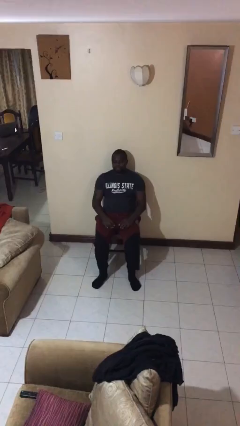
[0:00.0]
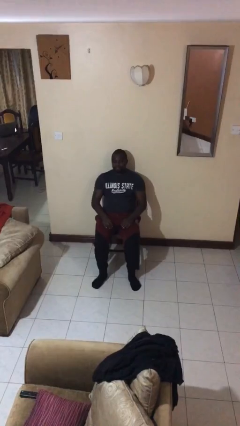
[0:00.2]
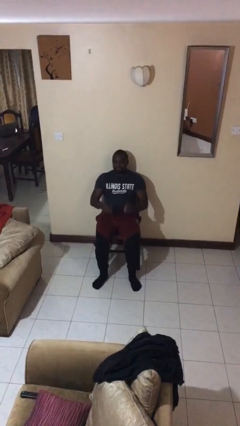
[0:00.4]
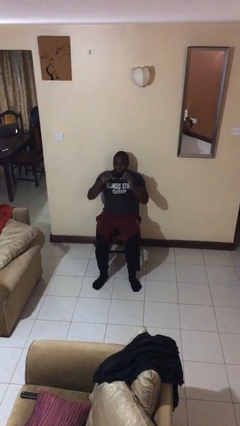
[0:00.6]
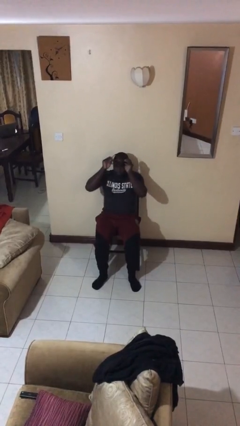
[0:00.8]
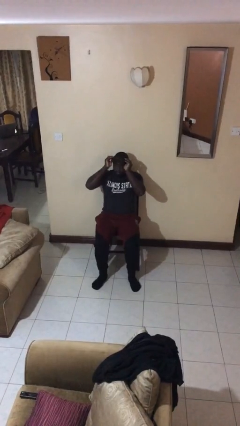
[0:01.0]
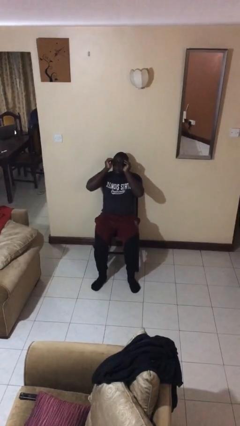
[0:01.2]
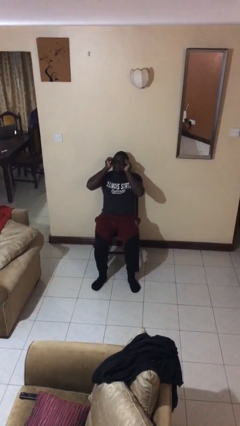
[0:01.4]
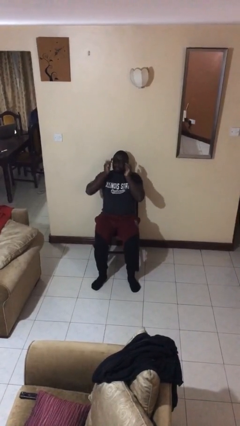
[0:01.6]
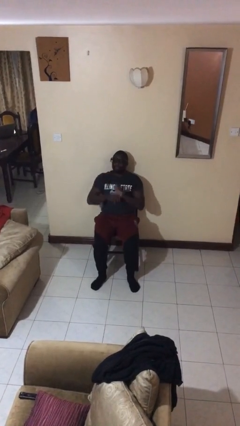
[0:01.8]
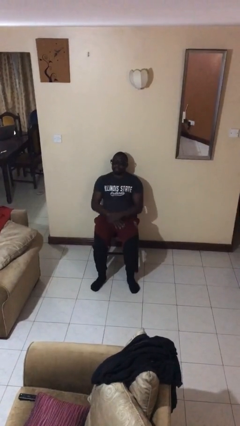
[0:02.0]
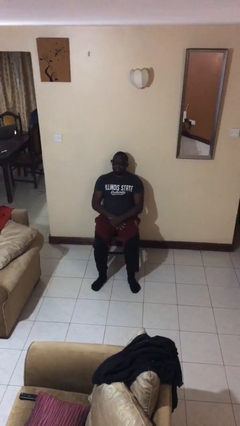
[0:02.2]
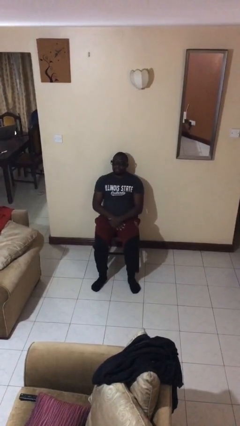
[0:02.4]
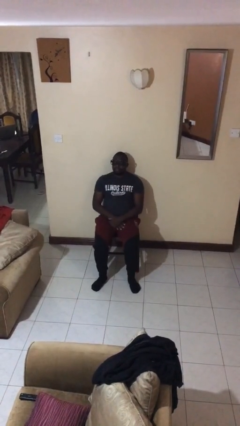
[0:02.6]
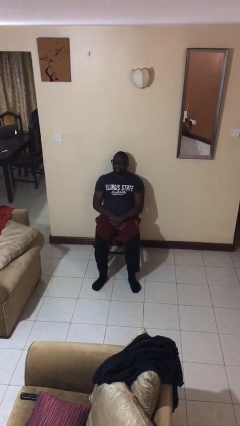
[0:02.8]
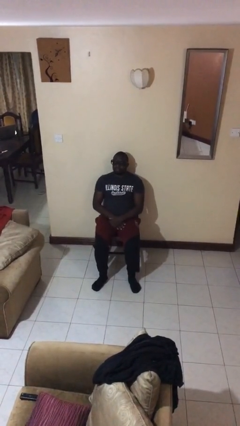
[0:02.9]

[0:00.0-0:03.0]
person puts on glasses

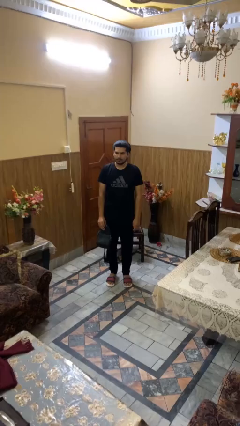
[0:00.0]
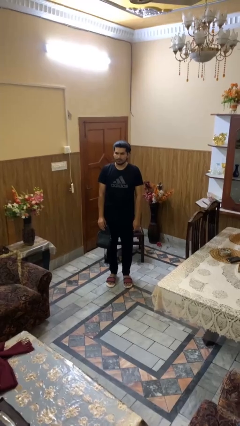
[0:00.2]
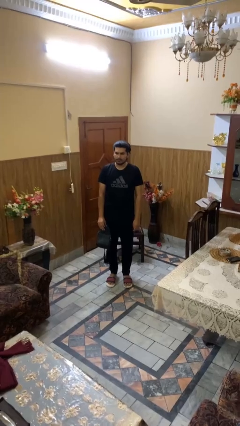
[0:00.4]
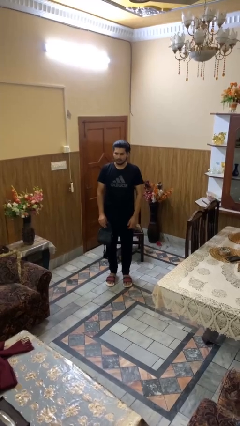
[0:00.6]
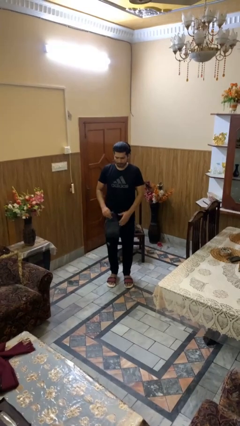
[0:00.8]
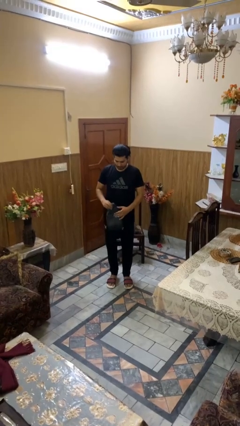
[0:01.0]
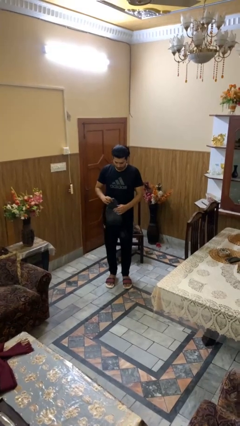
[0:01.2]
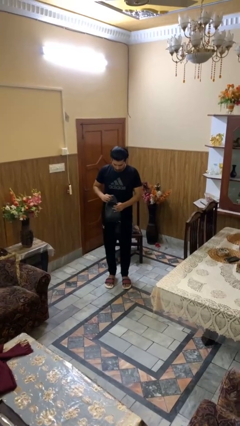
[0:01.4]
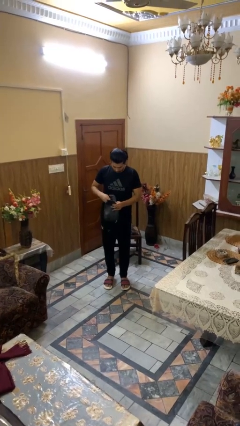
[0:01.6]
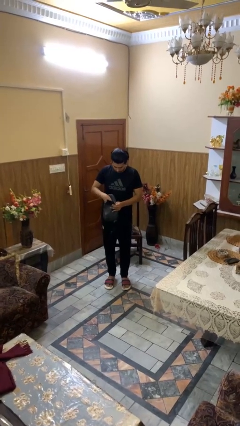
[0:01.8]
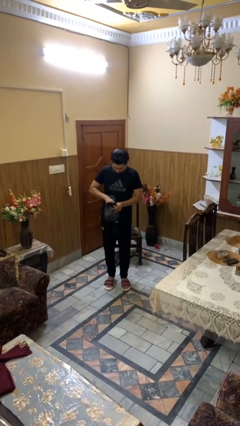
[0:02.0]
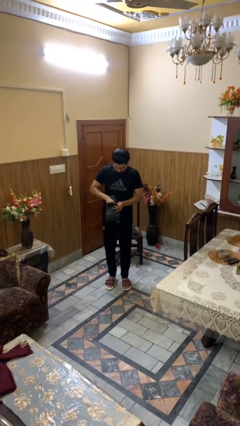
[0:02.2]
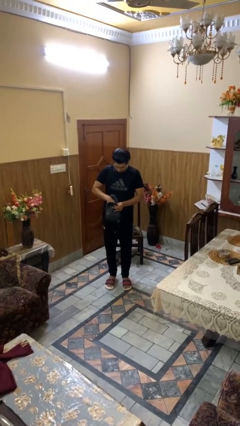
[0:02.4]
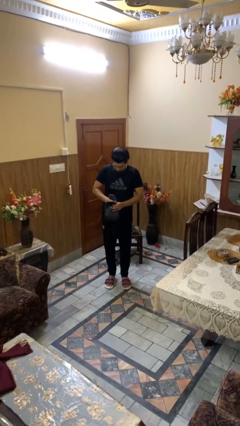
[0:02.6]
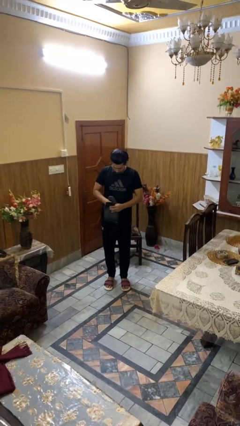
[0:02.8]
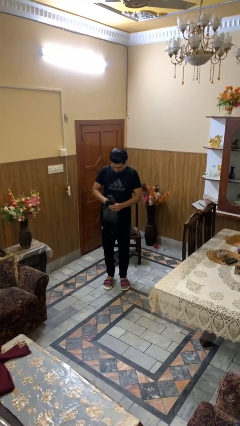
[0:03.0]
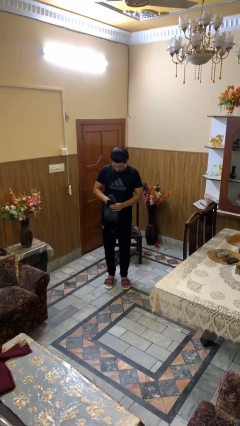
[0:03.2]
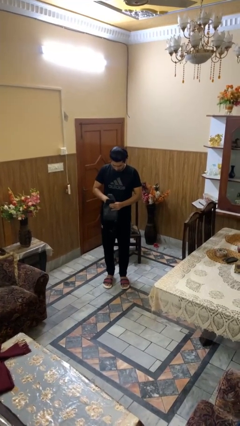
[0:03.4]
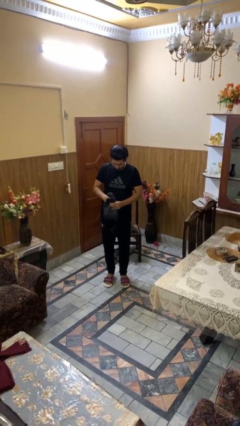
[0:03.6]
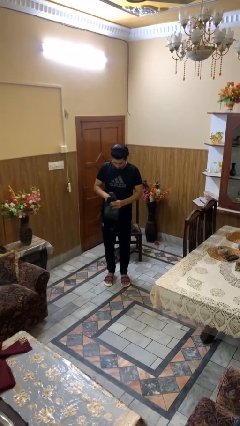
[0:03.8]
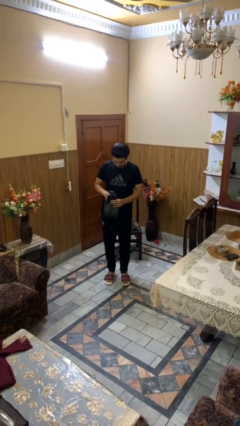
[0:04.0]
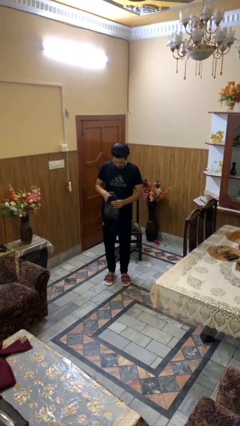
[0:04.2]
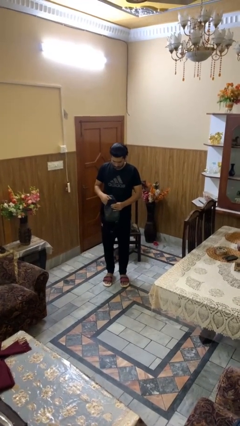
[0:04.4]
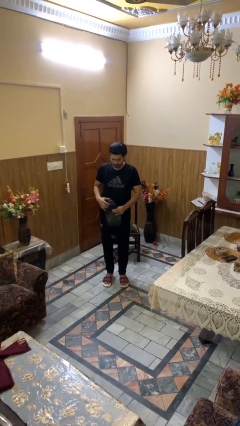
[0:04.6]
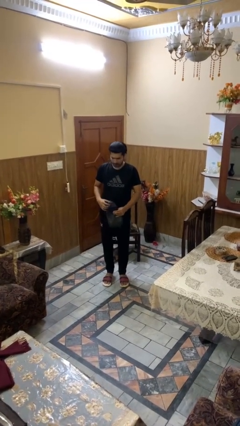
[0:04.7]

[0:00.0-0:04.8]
person searches in purse

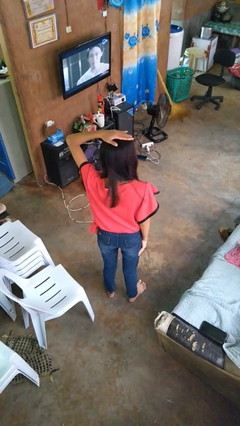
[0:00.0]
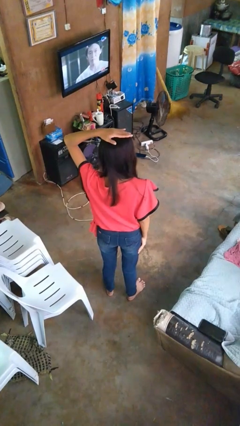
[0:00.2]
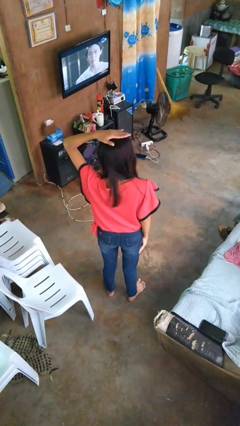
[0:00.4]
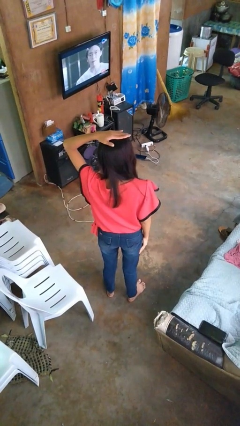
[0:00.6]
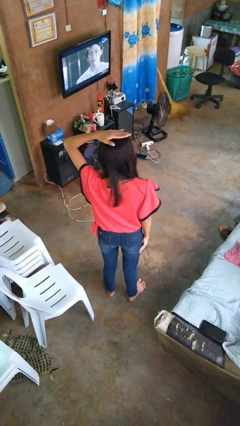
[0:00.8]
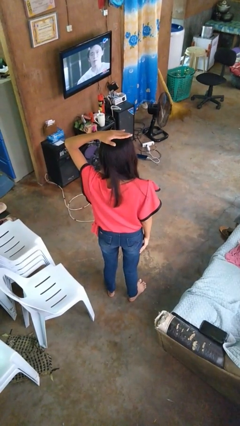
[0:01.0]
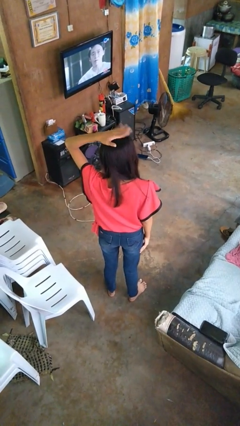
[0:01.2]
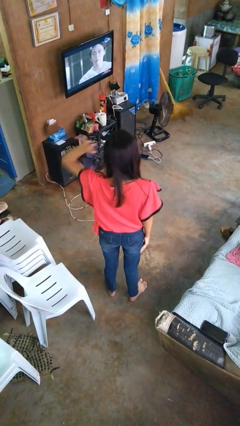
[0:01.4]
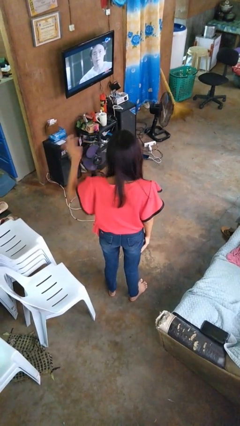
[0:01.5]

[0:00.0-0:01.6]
person pats head

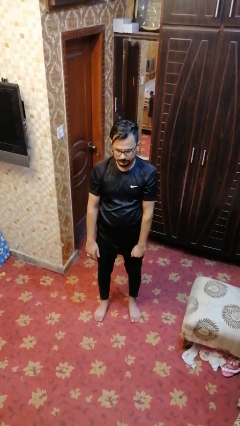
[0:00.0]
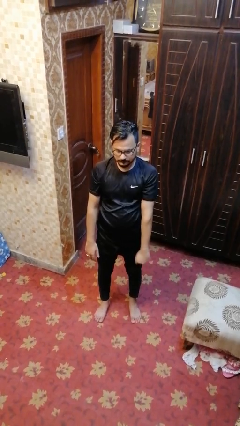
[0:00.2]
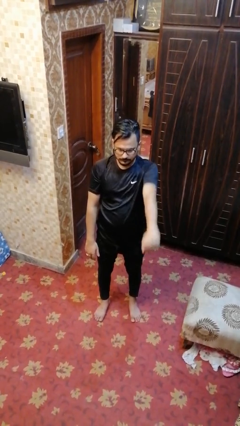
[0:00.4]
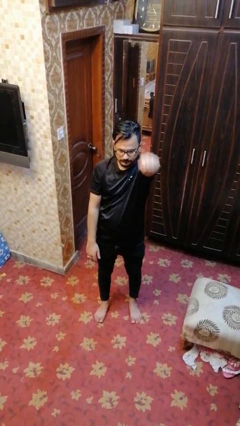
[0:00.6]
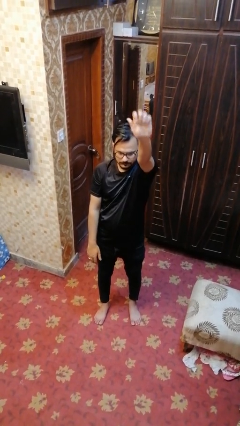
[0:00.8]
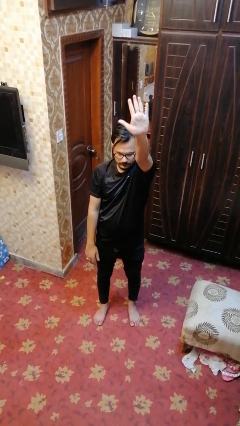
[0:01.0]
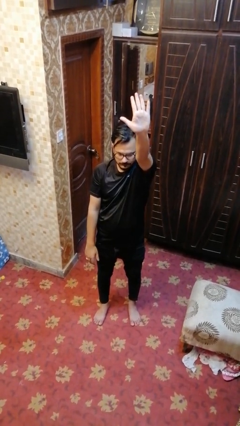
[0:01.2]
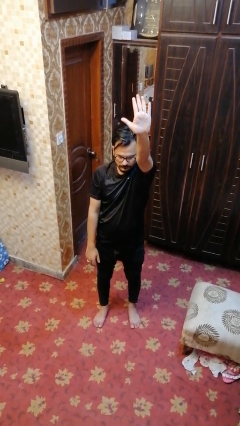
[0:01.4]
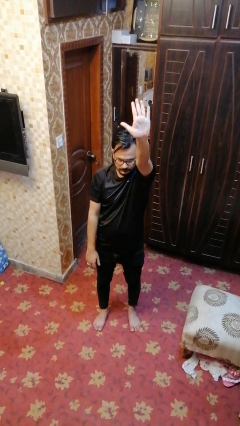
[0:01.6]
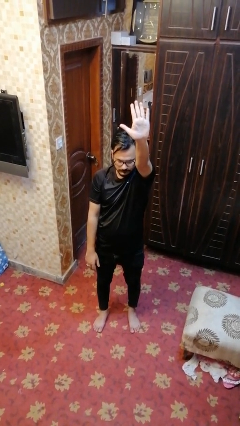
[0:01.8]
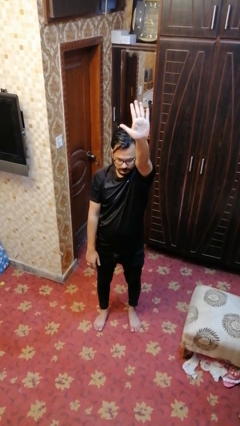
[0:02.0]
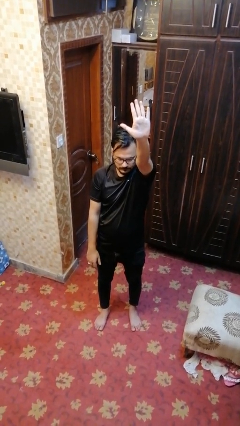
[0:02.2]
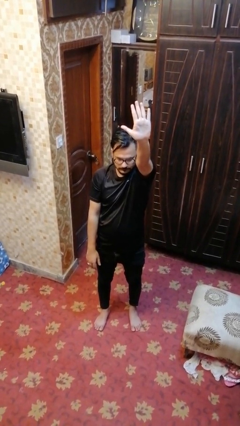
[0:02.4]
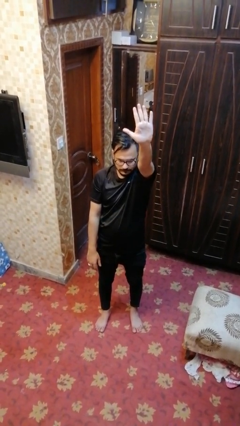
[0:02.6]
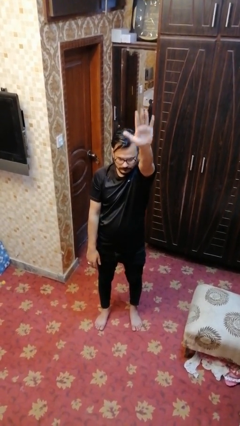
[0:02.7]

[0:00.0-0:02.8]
person gestures number five

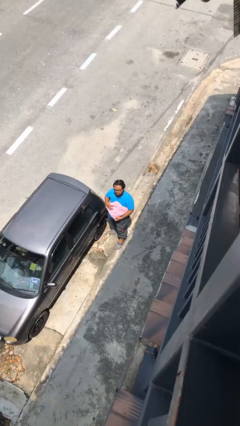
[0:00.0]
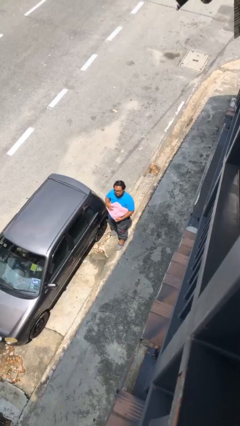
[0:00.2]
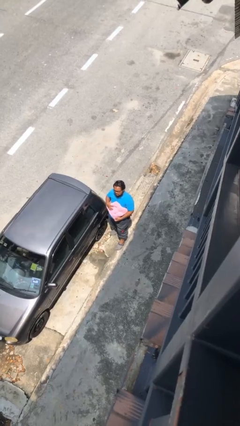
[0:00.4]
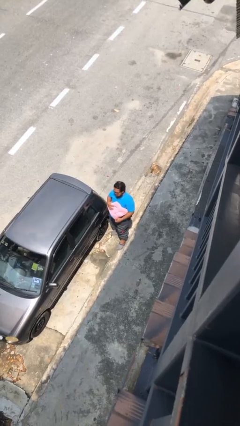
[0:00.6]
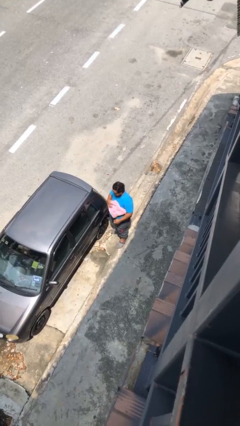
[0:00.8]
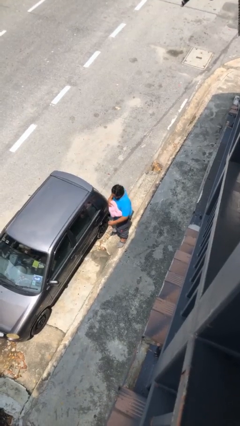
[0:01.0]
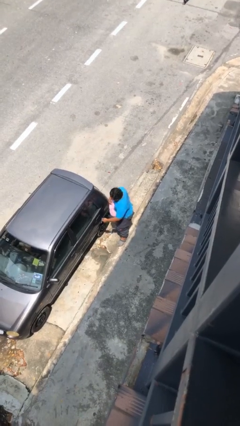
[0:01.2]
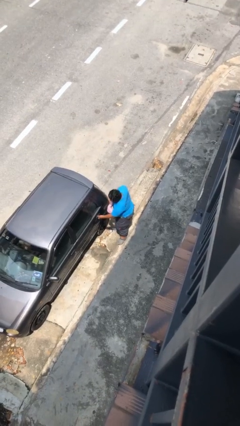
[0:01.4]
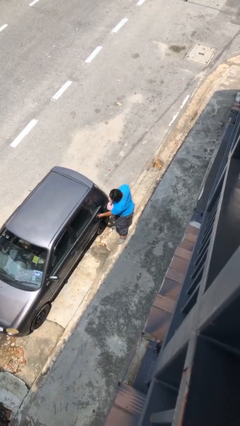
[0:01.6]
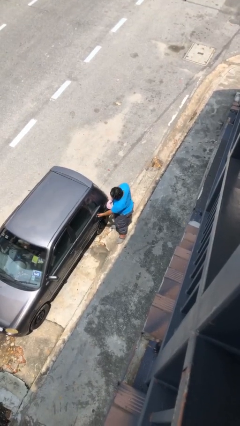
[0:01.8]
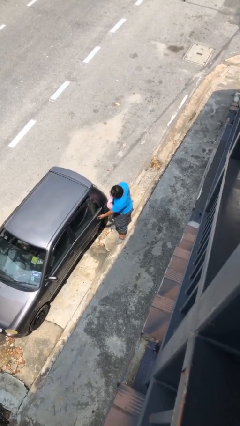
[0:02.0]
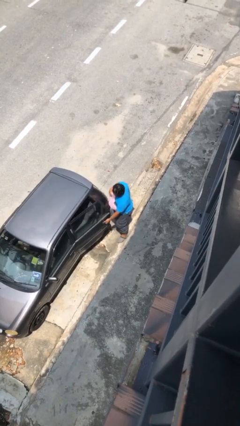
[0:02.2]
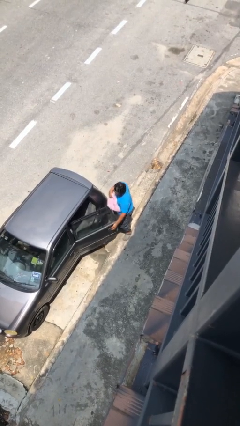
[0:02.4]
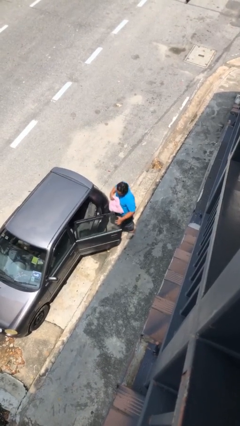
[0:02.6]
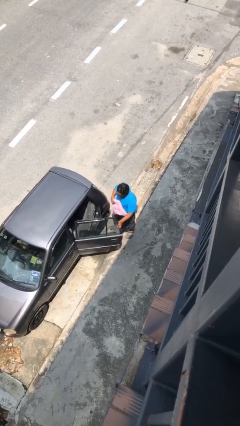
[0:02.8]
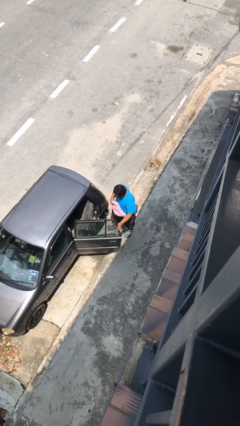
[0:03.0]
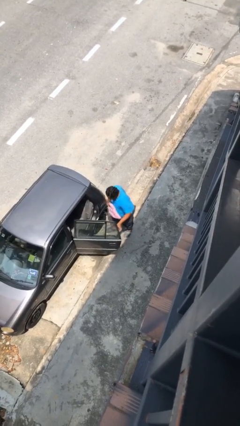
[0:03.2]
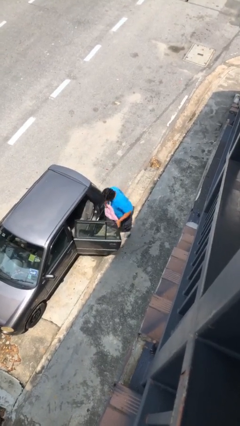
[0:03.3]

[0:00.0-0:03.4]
person opens car door

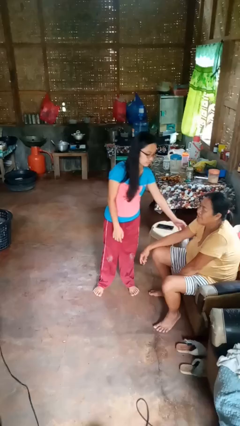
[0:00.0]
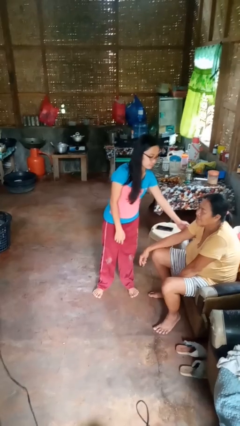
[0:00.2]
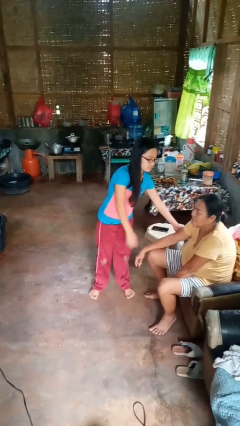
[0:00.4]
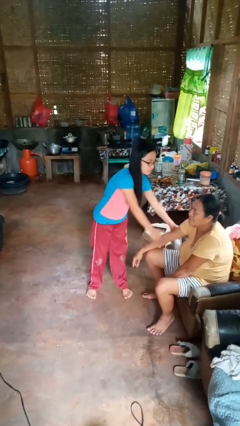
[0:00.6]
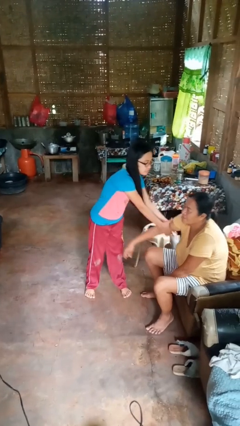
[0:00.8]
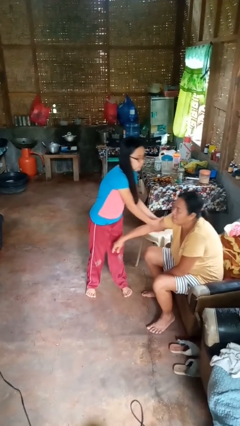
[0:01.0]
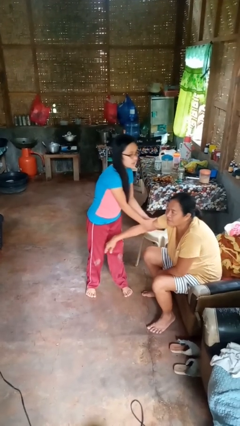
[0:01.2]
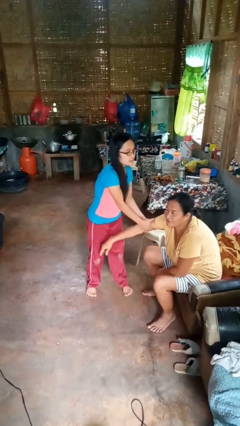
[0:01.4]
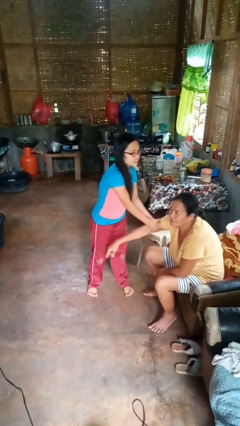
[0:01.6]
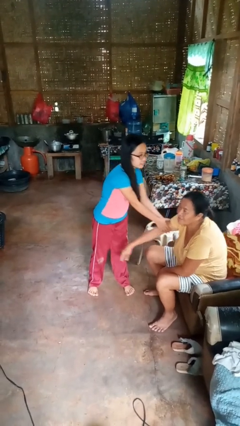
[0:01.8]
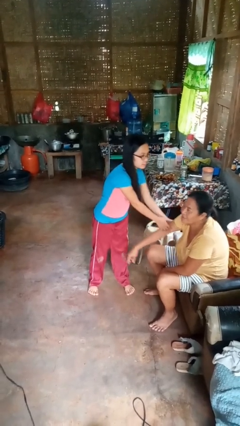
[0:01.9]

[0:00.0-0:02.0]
person grabs person by bicep
